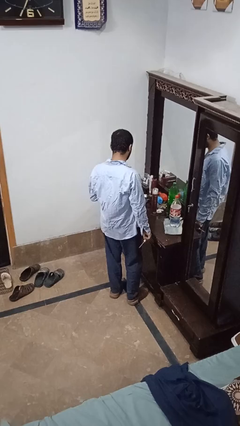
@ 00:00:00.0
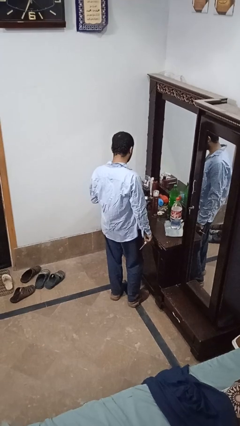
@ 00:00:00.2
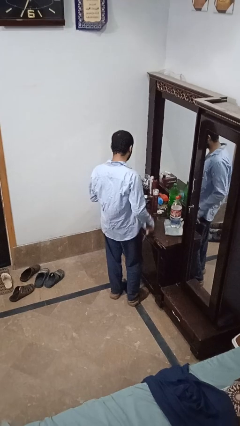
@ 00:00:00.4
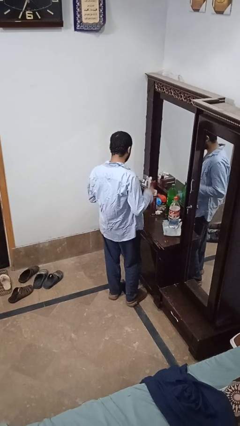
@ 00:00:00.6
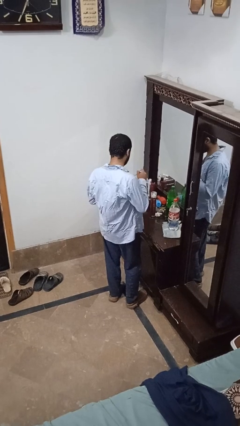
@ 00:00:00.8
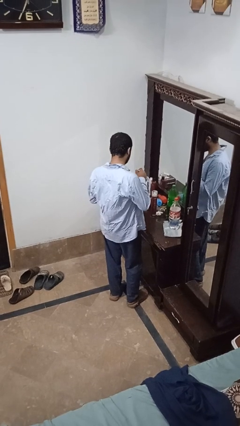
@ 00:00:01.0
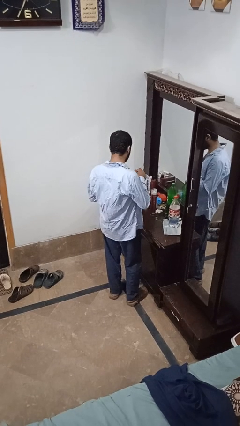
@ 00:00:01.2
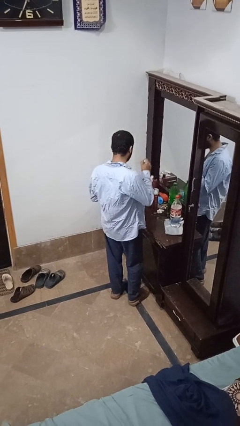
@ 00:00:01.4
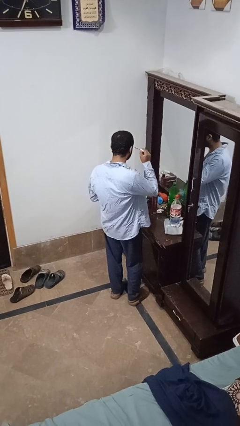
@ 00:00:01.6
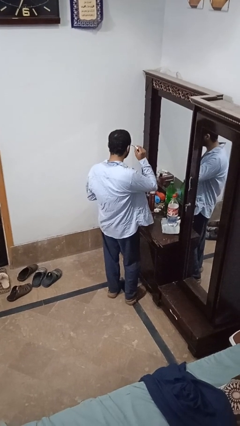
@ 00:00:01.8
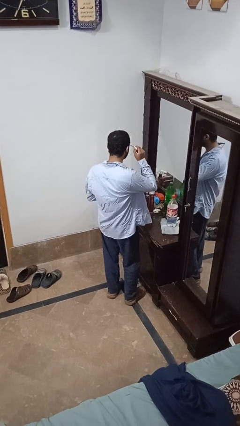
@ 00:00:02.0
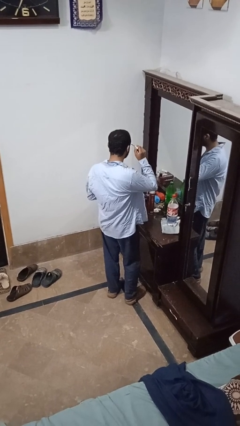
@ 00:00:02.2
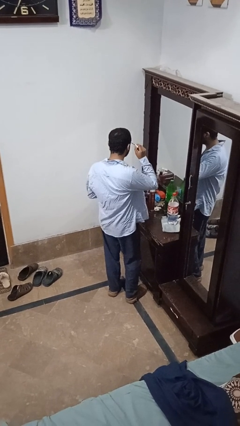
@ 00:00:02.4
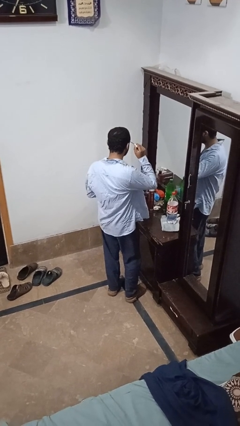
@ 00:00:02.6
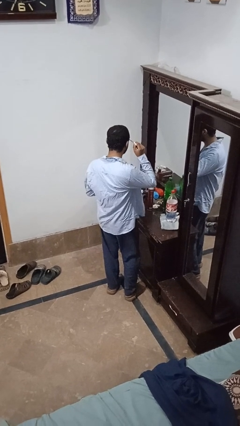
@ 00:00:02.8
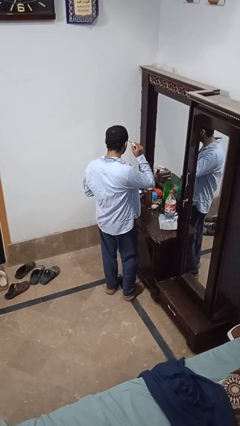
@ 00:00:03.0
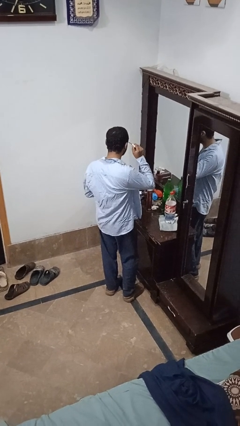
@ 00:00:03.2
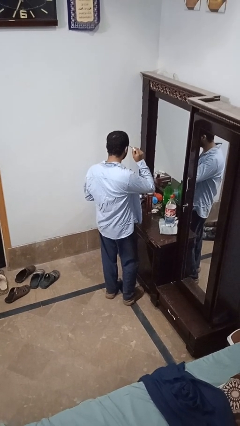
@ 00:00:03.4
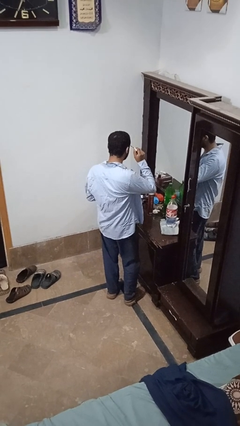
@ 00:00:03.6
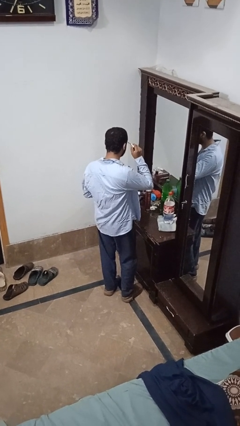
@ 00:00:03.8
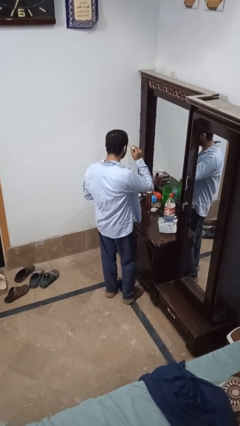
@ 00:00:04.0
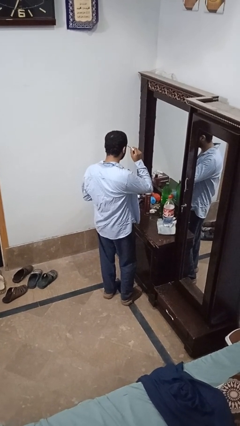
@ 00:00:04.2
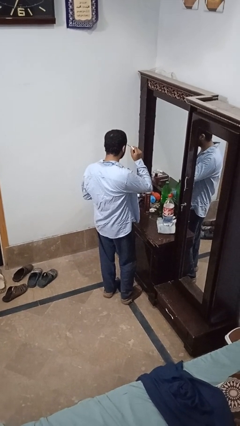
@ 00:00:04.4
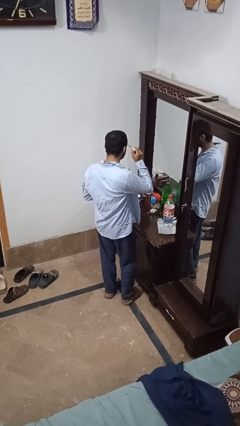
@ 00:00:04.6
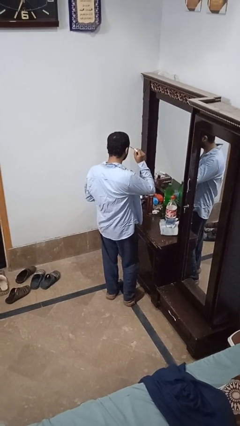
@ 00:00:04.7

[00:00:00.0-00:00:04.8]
person applies eye makeup

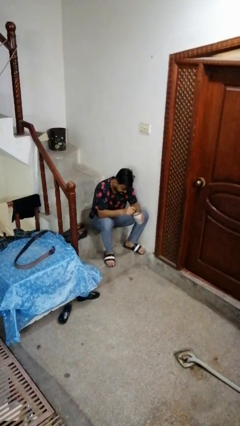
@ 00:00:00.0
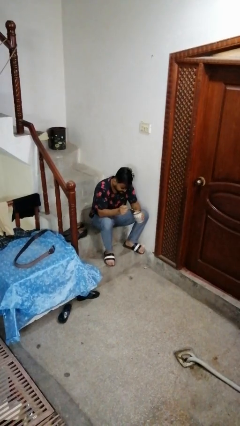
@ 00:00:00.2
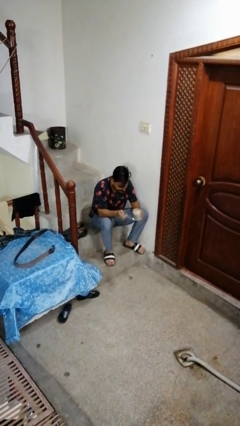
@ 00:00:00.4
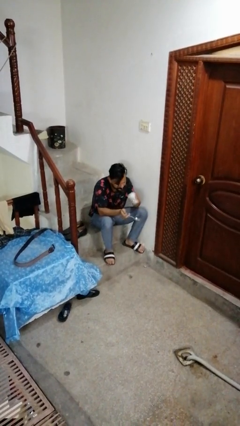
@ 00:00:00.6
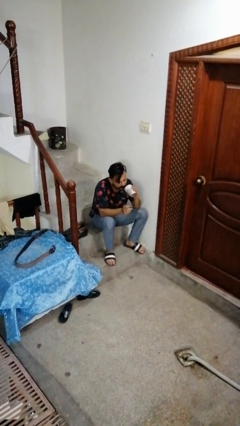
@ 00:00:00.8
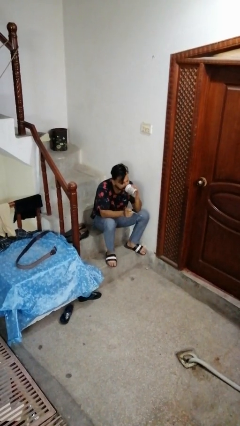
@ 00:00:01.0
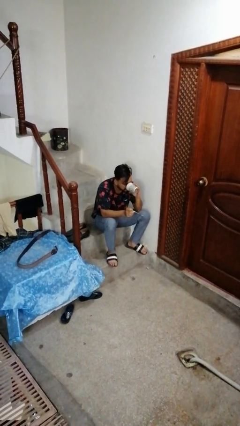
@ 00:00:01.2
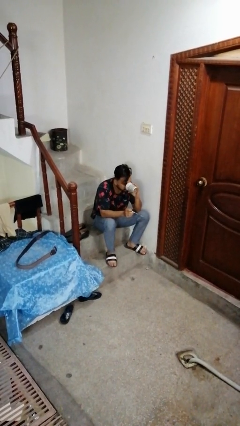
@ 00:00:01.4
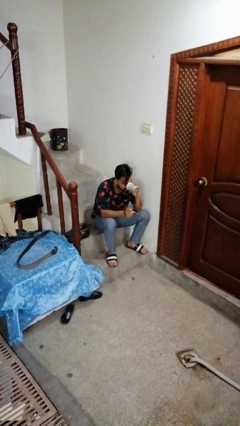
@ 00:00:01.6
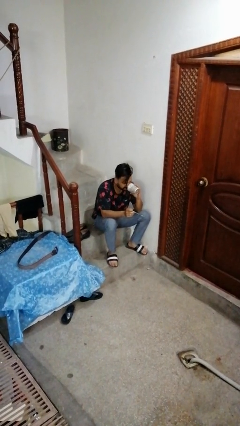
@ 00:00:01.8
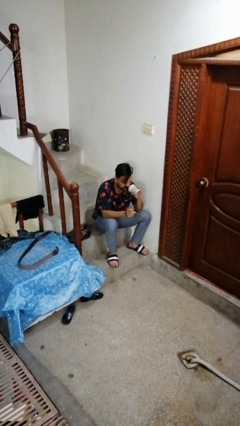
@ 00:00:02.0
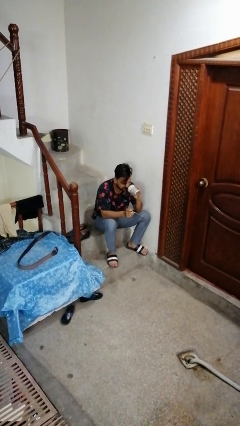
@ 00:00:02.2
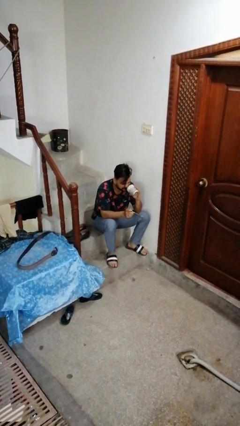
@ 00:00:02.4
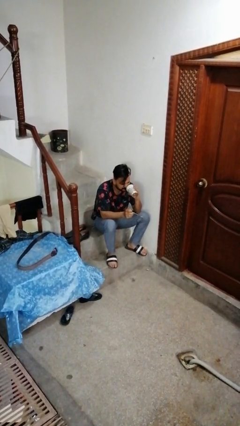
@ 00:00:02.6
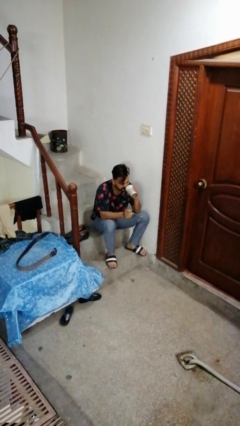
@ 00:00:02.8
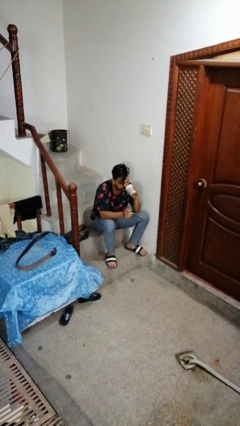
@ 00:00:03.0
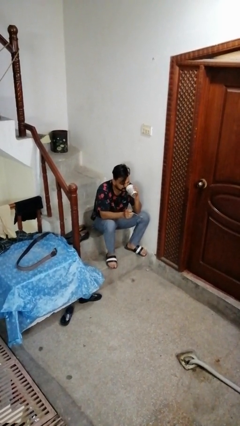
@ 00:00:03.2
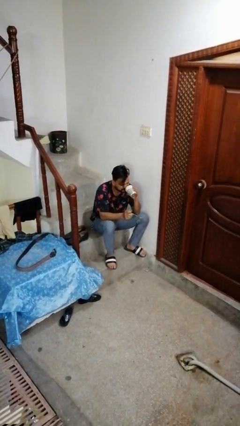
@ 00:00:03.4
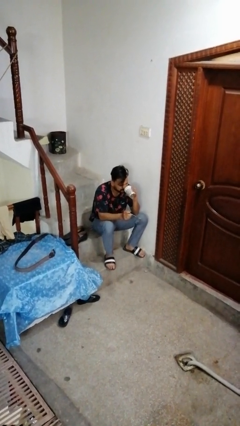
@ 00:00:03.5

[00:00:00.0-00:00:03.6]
person drinks from mug

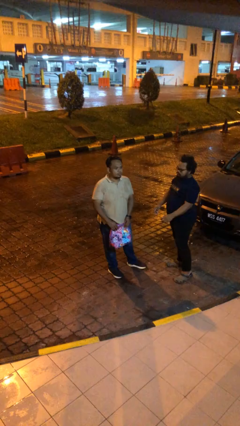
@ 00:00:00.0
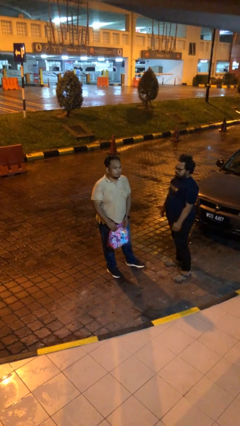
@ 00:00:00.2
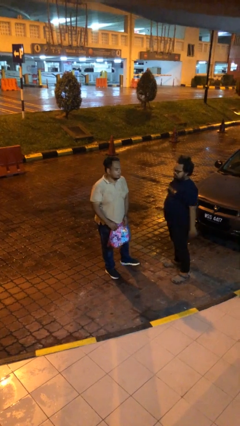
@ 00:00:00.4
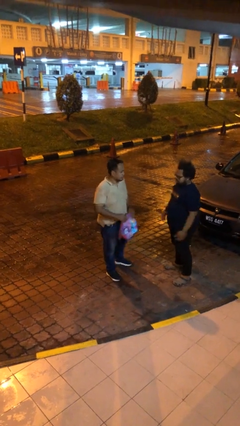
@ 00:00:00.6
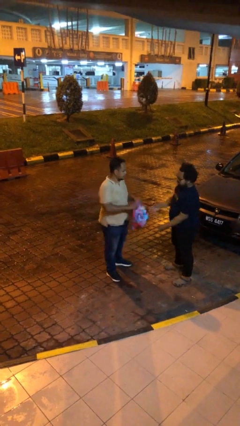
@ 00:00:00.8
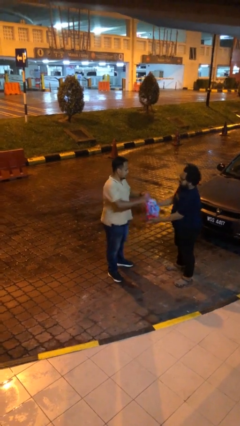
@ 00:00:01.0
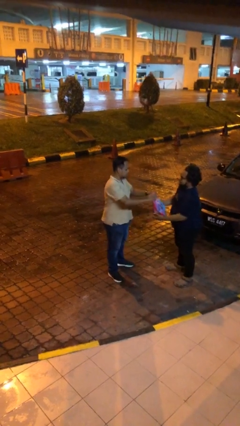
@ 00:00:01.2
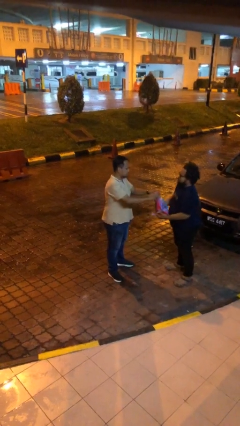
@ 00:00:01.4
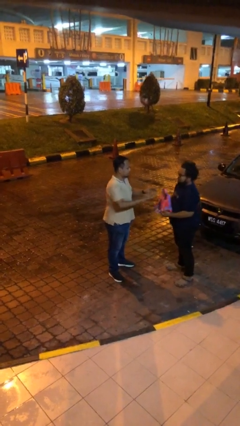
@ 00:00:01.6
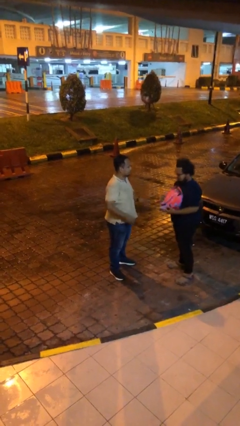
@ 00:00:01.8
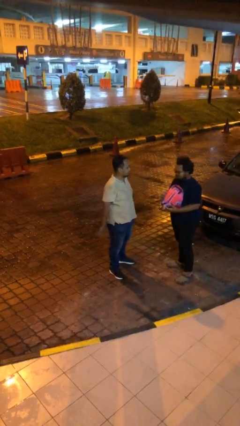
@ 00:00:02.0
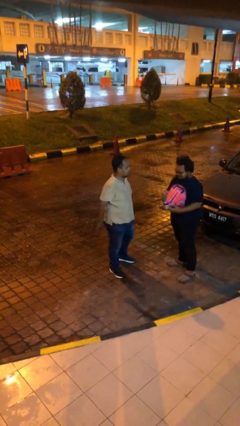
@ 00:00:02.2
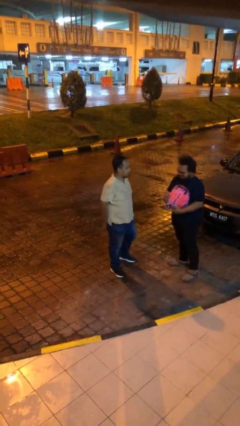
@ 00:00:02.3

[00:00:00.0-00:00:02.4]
person transfers object to person

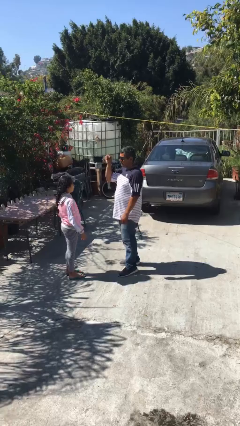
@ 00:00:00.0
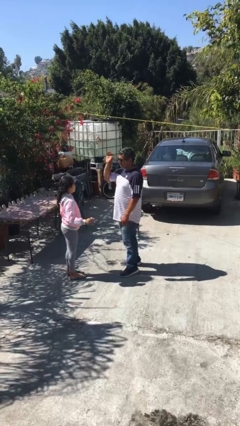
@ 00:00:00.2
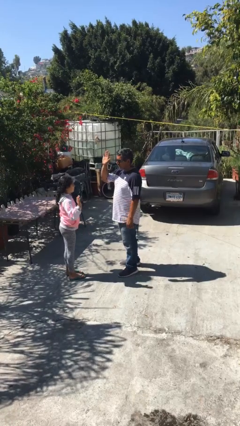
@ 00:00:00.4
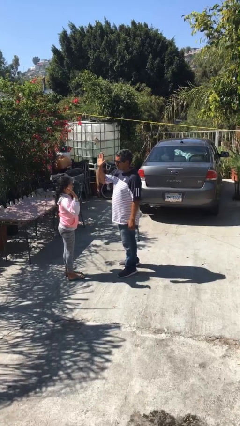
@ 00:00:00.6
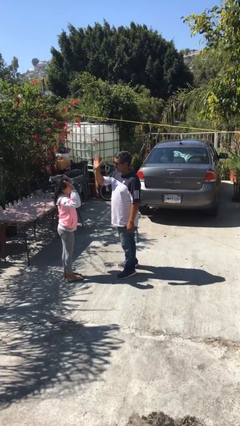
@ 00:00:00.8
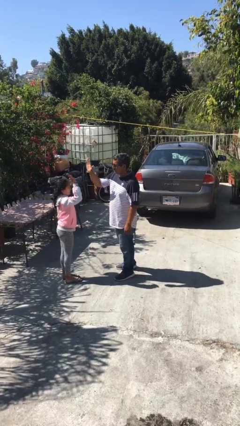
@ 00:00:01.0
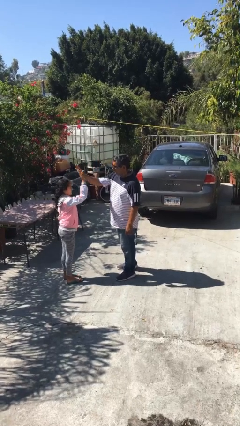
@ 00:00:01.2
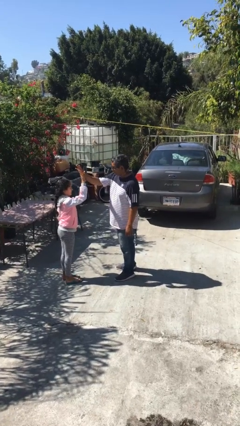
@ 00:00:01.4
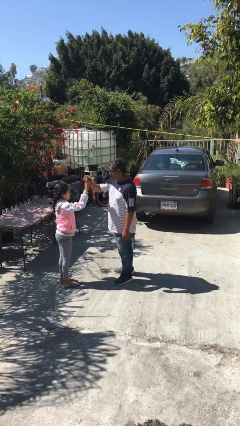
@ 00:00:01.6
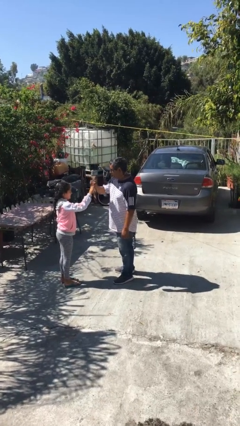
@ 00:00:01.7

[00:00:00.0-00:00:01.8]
person highfives hand

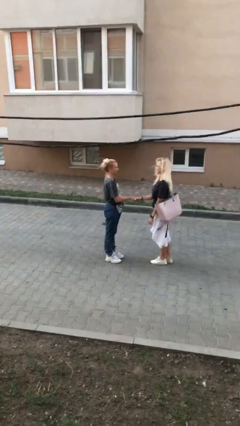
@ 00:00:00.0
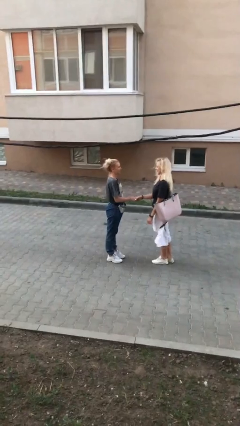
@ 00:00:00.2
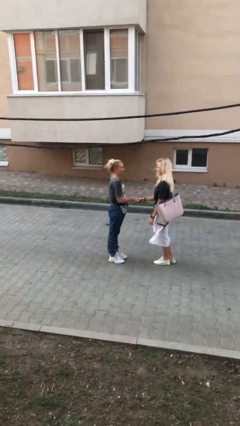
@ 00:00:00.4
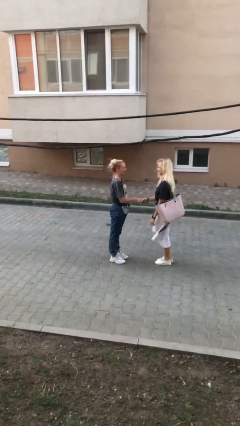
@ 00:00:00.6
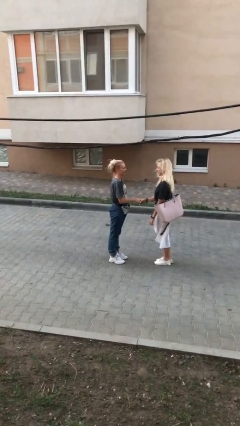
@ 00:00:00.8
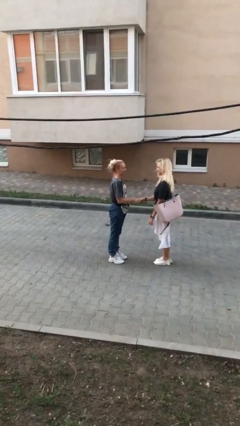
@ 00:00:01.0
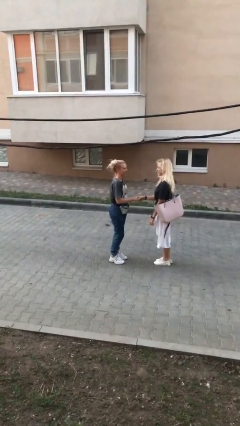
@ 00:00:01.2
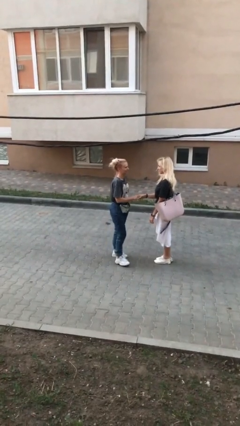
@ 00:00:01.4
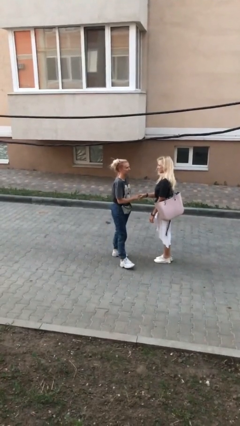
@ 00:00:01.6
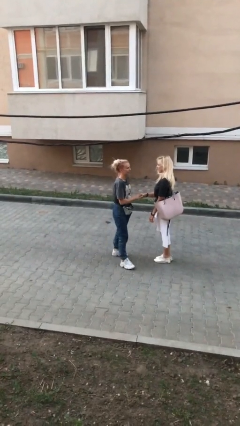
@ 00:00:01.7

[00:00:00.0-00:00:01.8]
person shakes hand

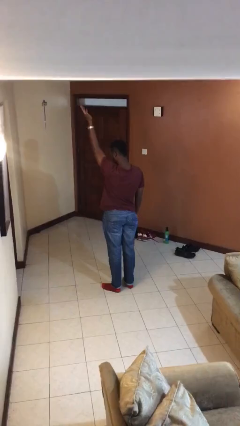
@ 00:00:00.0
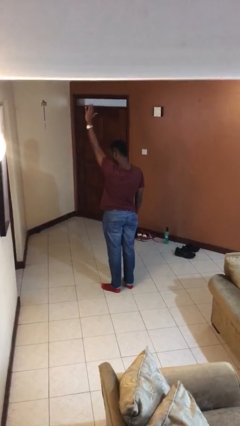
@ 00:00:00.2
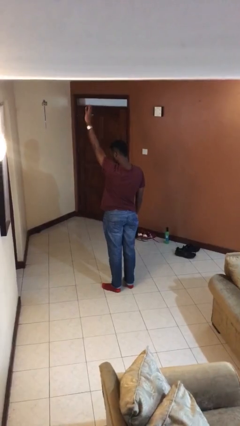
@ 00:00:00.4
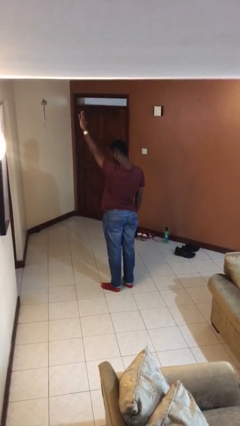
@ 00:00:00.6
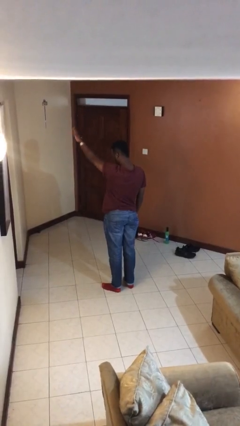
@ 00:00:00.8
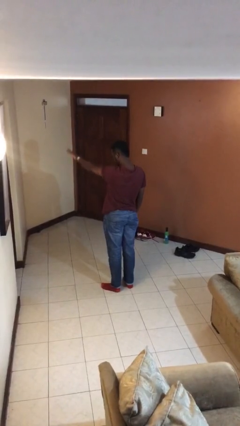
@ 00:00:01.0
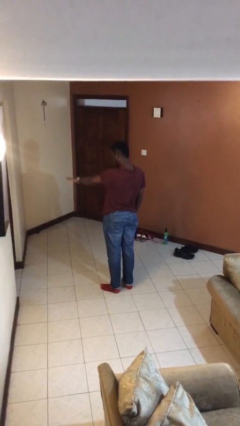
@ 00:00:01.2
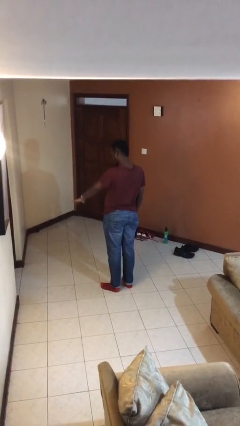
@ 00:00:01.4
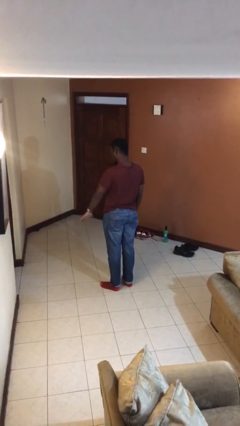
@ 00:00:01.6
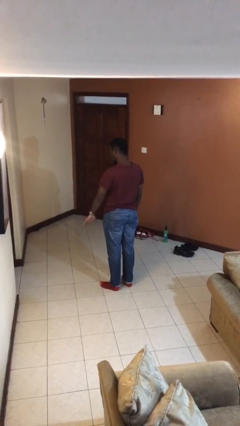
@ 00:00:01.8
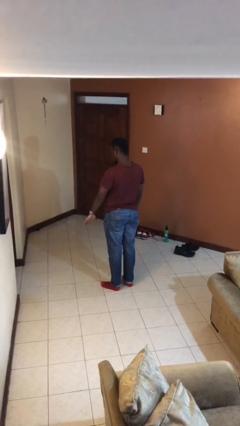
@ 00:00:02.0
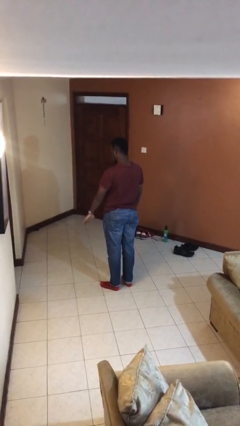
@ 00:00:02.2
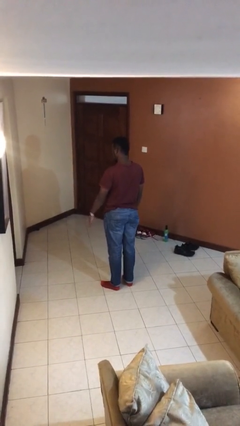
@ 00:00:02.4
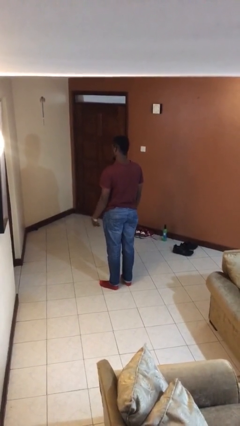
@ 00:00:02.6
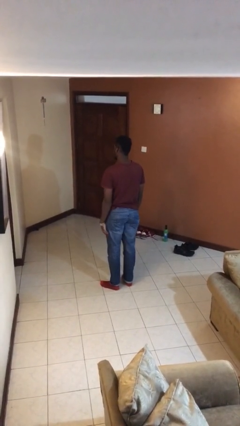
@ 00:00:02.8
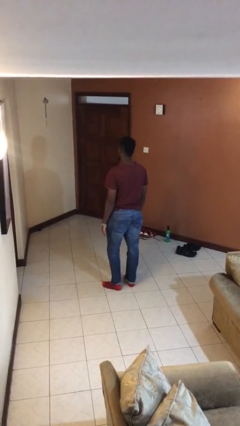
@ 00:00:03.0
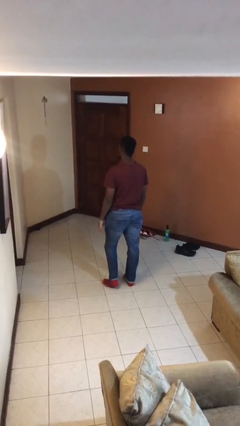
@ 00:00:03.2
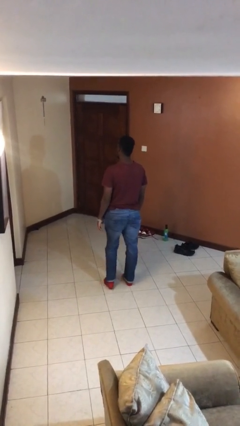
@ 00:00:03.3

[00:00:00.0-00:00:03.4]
person gestures swipe down
